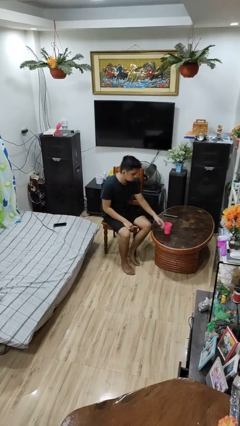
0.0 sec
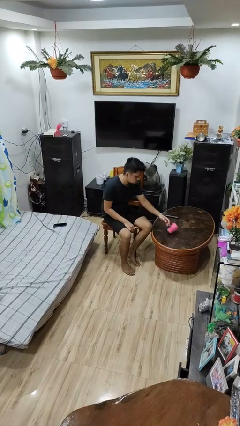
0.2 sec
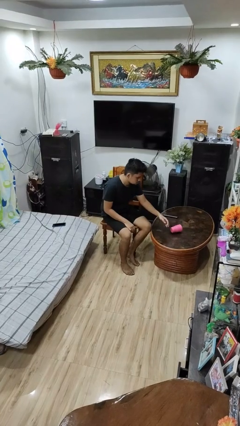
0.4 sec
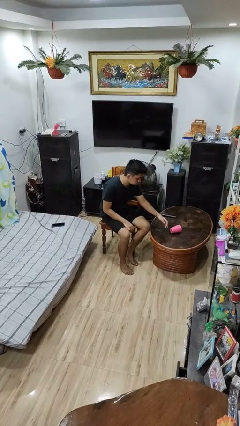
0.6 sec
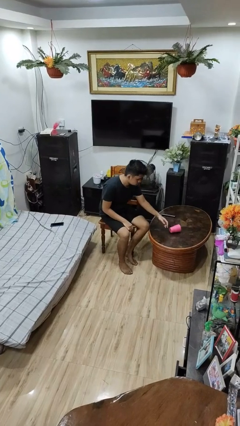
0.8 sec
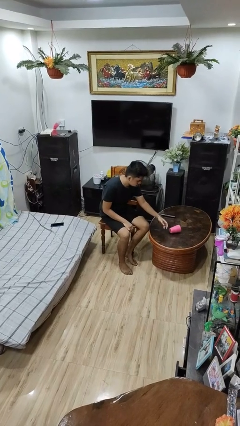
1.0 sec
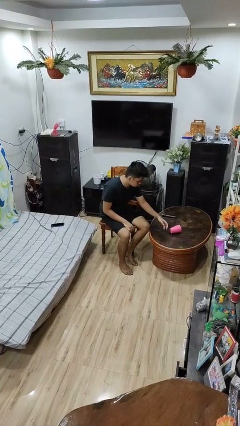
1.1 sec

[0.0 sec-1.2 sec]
person knocks over glass

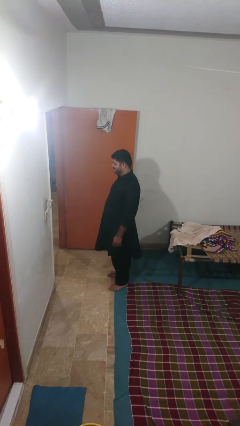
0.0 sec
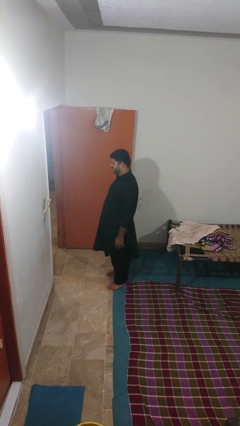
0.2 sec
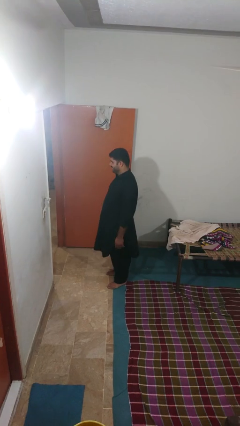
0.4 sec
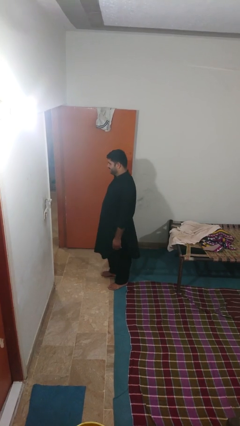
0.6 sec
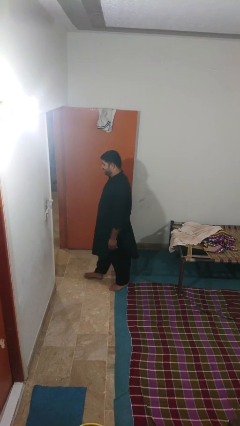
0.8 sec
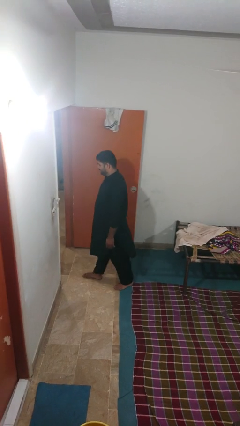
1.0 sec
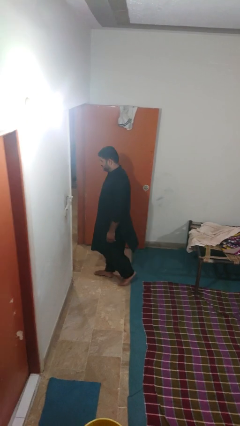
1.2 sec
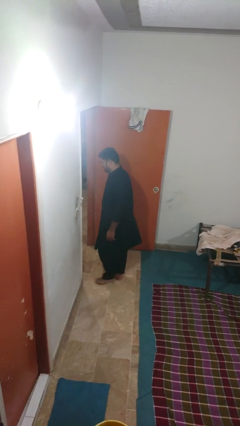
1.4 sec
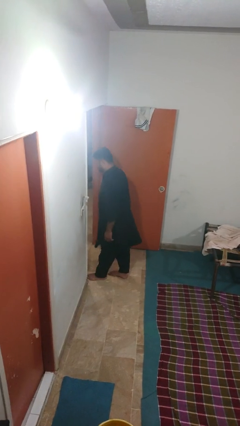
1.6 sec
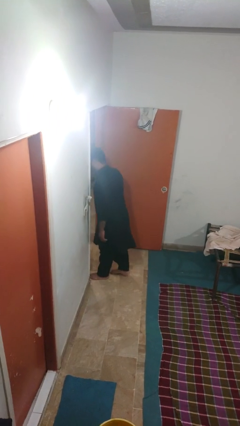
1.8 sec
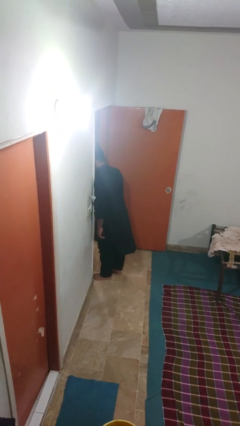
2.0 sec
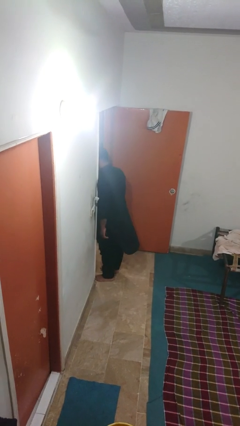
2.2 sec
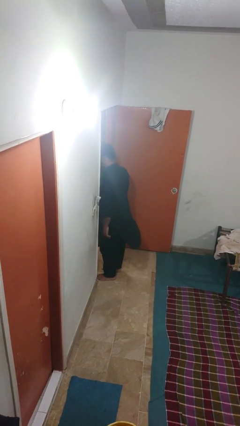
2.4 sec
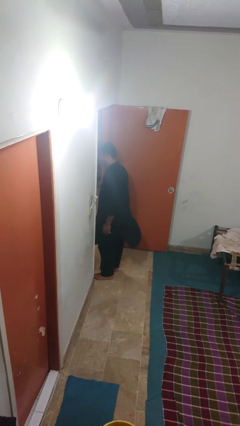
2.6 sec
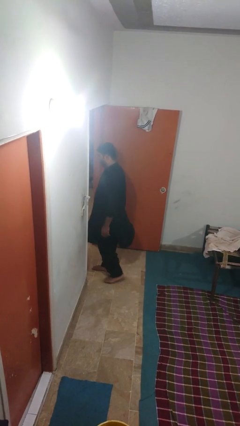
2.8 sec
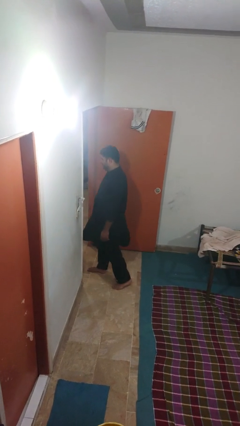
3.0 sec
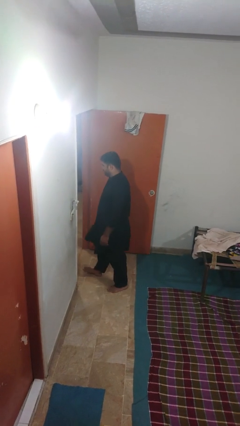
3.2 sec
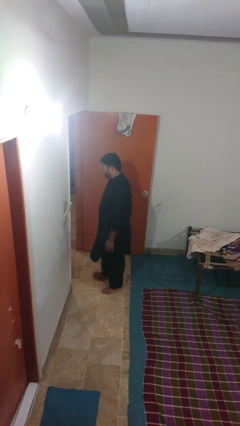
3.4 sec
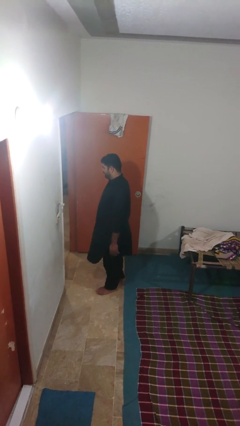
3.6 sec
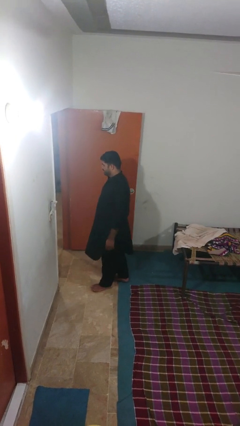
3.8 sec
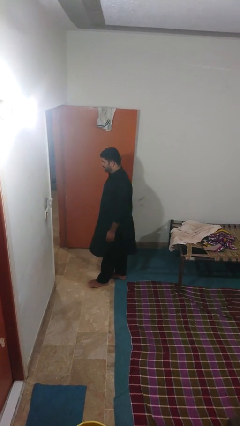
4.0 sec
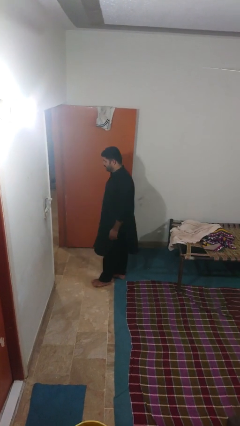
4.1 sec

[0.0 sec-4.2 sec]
person bumps into wall

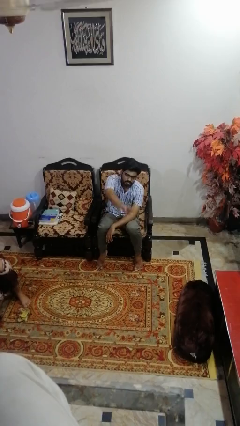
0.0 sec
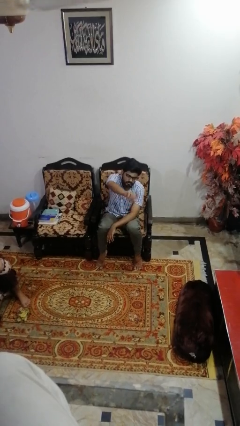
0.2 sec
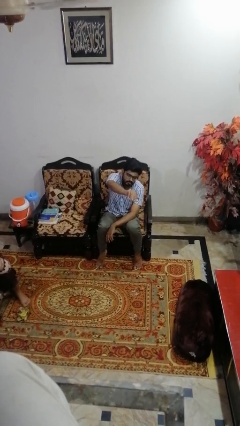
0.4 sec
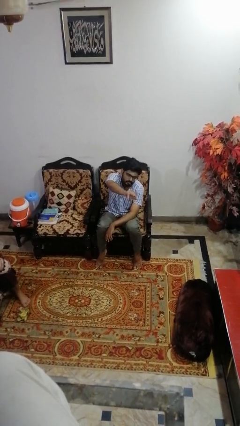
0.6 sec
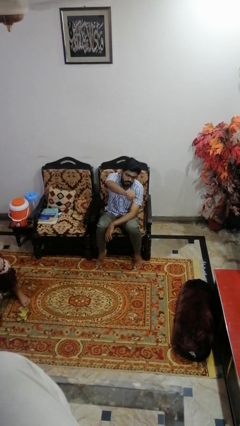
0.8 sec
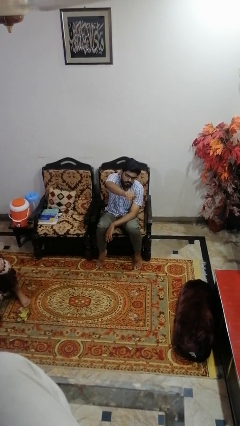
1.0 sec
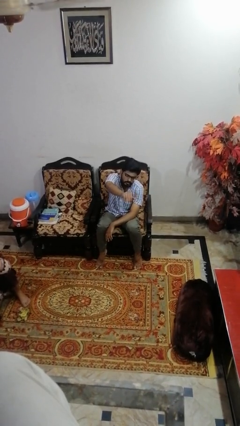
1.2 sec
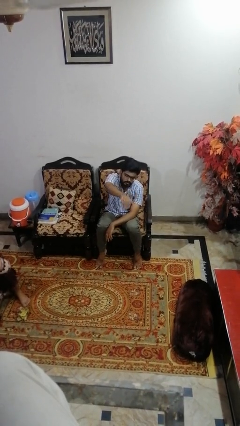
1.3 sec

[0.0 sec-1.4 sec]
person gestures come here

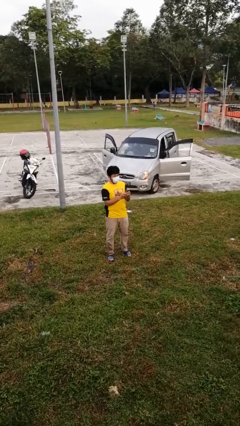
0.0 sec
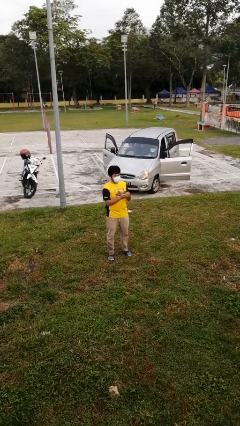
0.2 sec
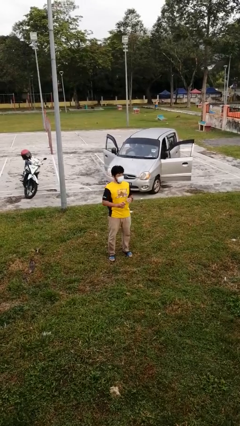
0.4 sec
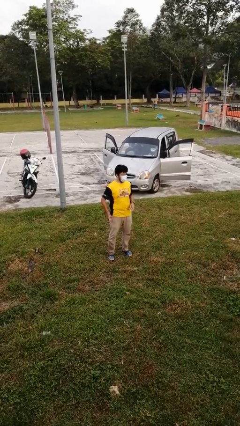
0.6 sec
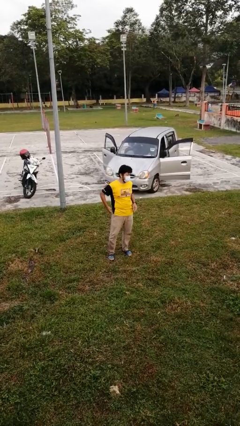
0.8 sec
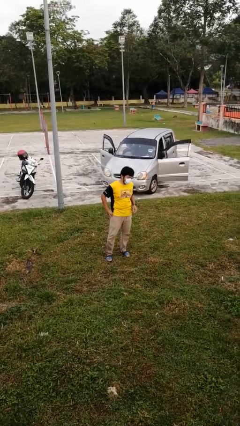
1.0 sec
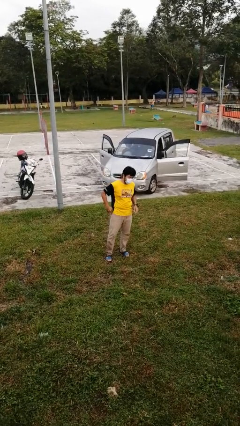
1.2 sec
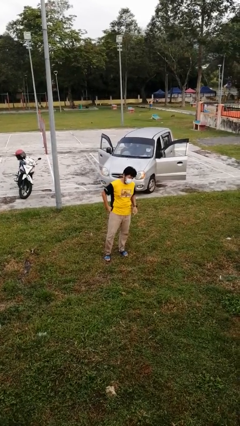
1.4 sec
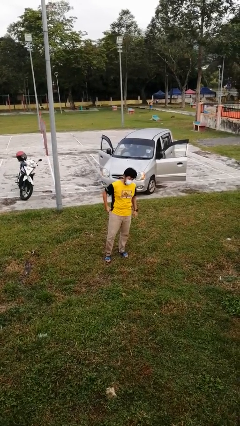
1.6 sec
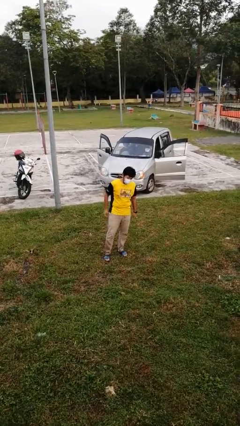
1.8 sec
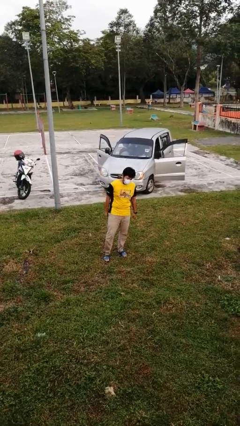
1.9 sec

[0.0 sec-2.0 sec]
person puts phone into pocket

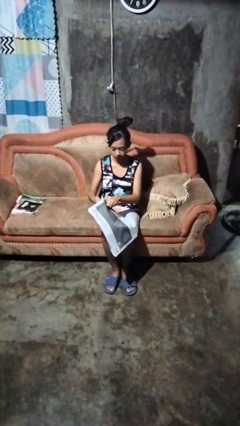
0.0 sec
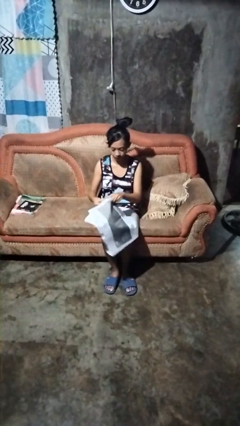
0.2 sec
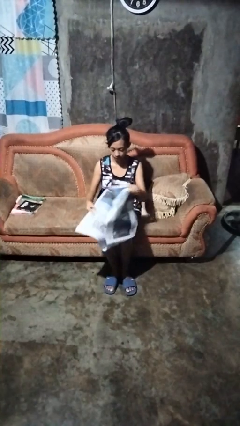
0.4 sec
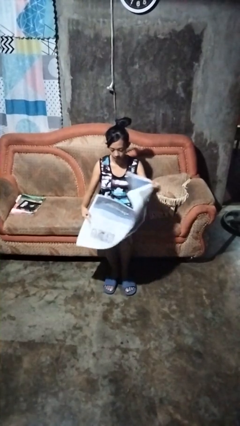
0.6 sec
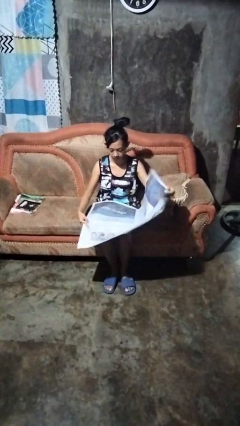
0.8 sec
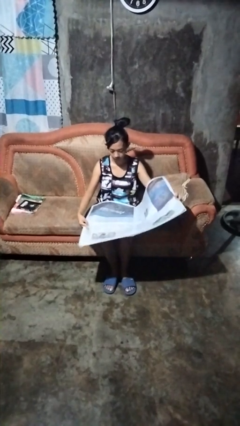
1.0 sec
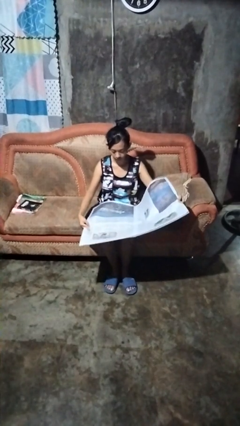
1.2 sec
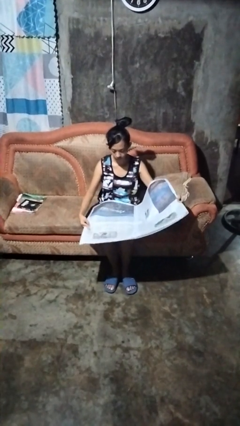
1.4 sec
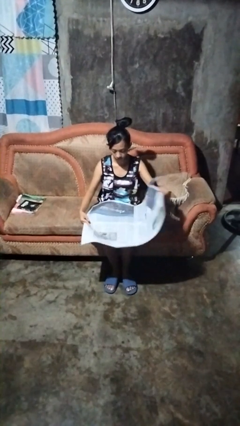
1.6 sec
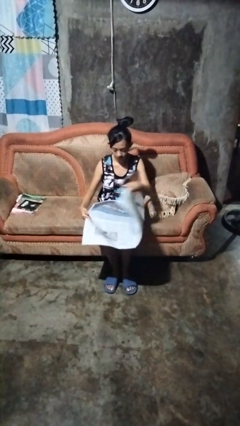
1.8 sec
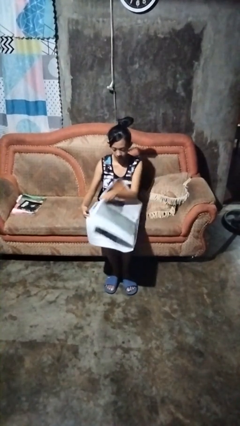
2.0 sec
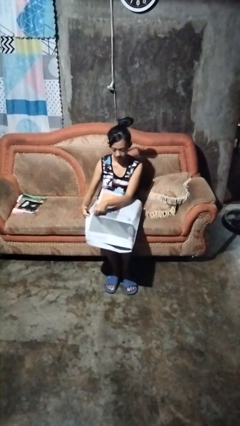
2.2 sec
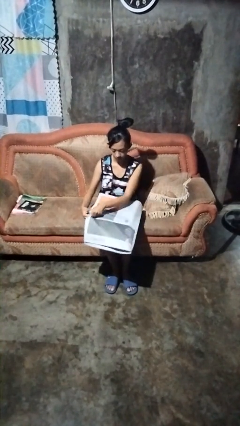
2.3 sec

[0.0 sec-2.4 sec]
person reads newspaper

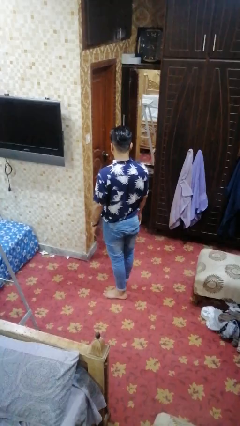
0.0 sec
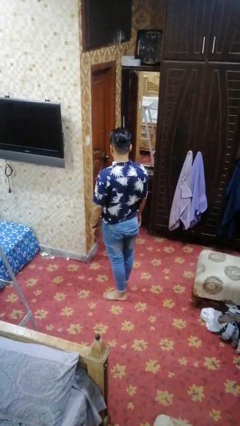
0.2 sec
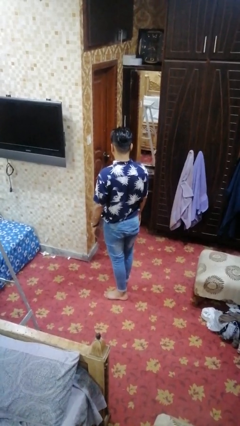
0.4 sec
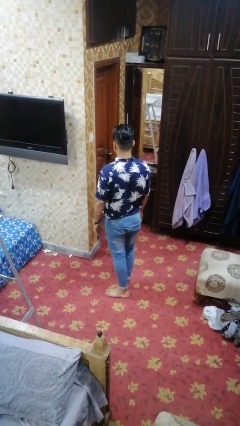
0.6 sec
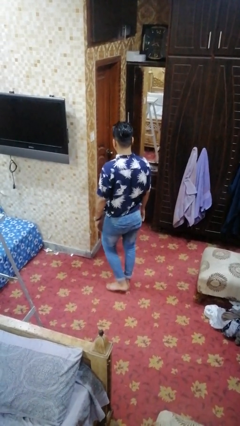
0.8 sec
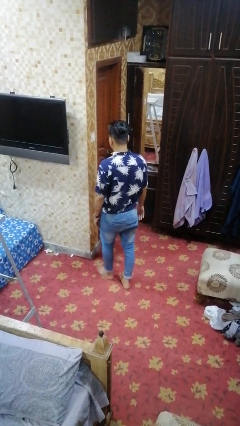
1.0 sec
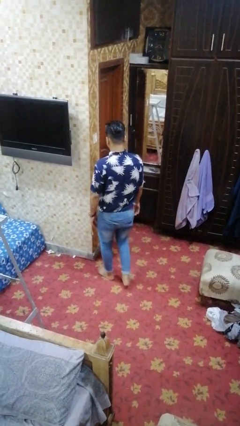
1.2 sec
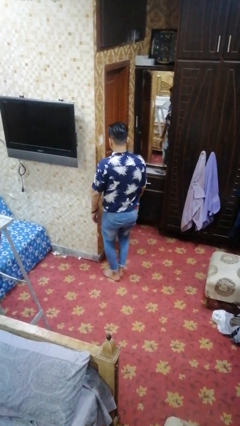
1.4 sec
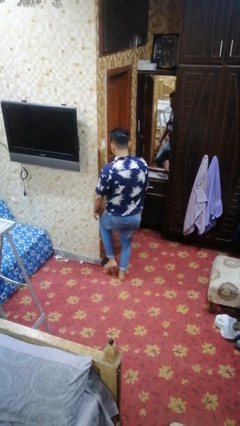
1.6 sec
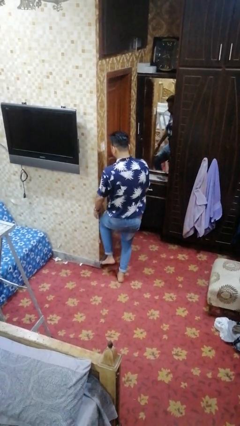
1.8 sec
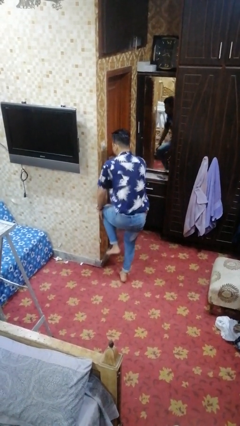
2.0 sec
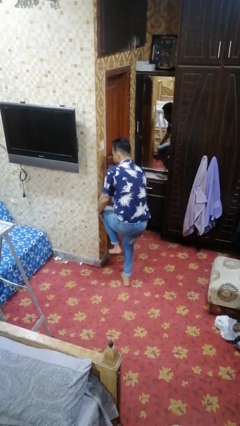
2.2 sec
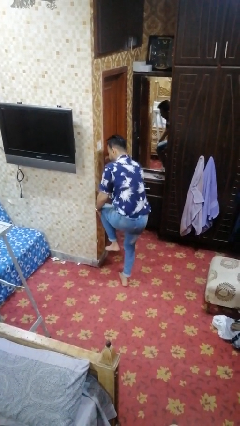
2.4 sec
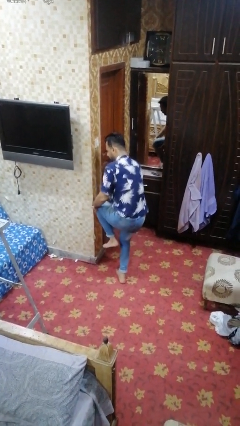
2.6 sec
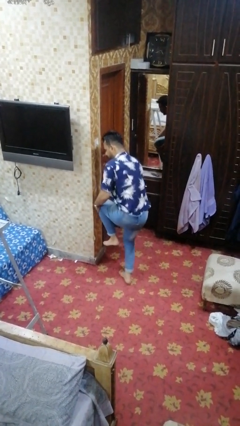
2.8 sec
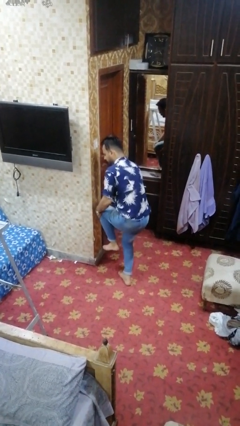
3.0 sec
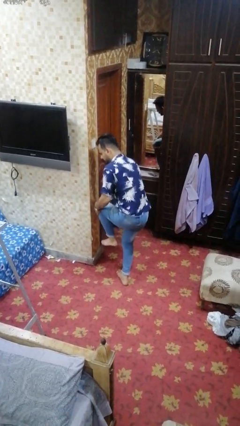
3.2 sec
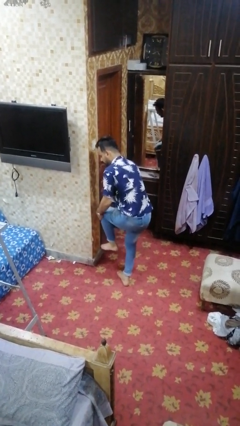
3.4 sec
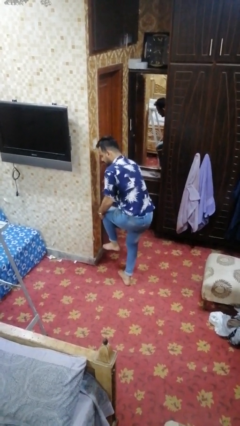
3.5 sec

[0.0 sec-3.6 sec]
person trips on object on floor

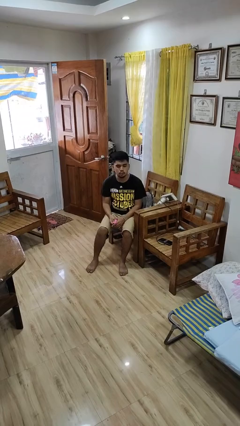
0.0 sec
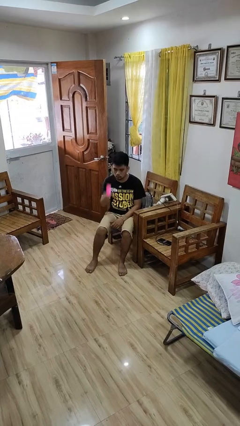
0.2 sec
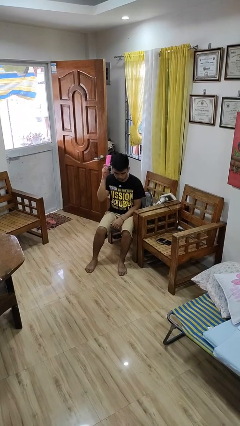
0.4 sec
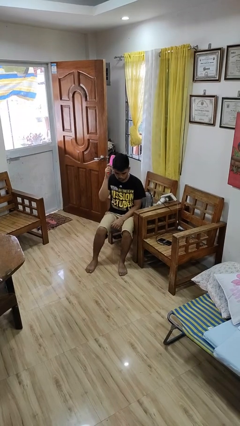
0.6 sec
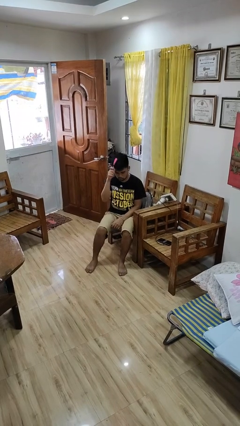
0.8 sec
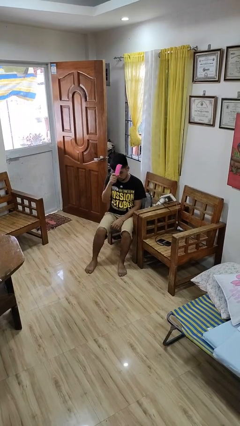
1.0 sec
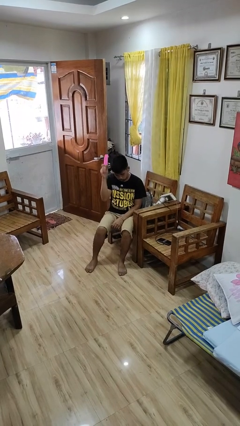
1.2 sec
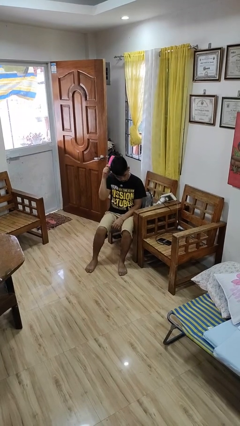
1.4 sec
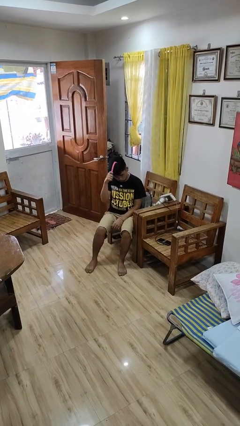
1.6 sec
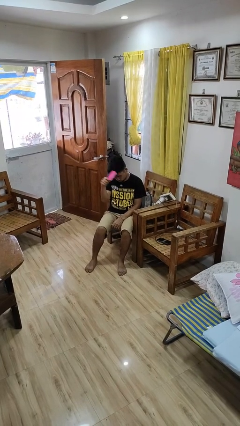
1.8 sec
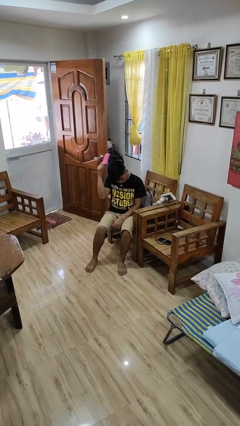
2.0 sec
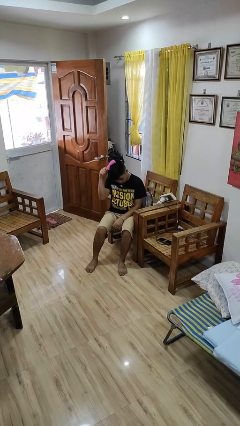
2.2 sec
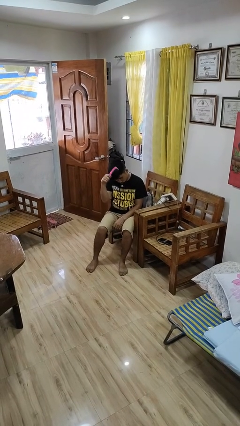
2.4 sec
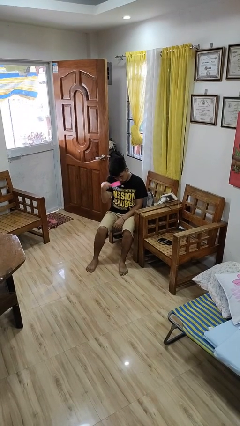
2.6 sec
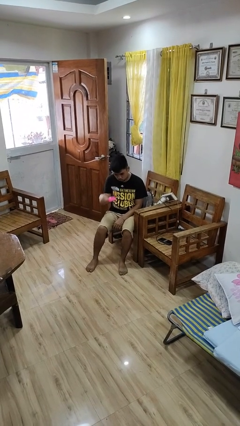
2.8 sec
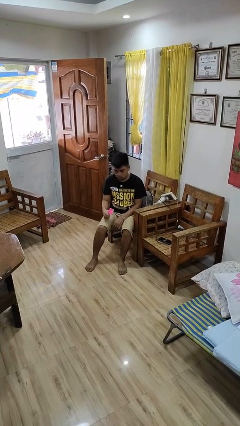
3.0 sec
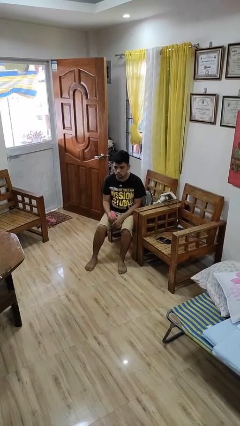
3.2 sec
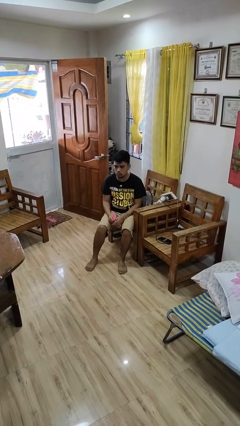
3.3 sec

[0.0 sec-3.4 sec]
person brushes hair
